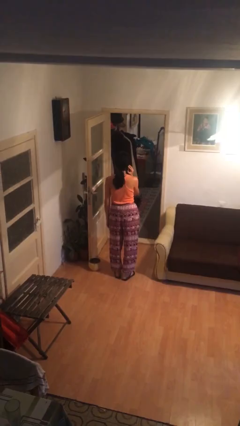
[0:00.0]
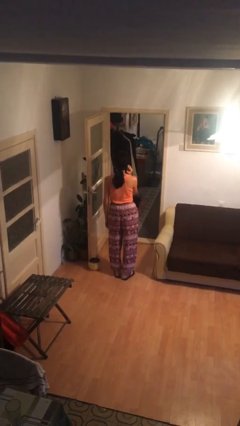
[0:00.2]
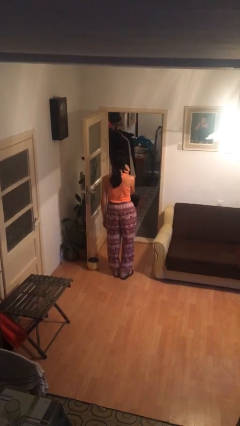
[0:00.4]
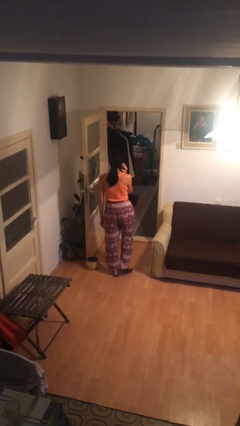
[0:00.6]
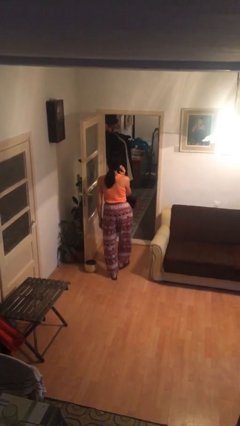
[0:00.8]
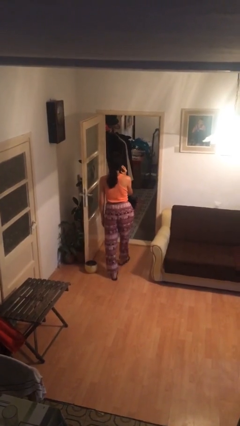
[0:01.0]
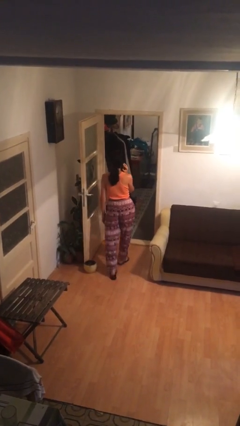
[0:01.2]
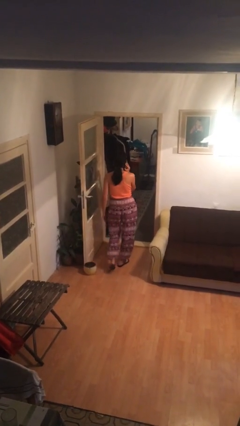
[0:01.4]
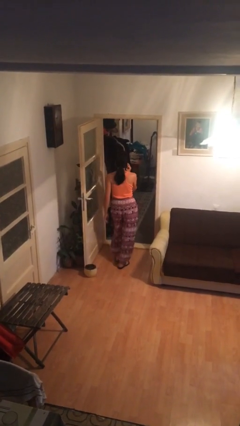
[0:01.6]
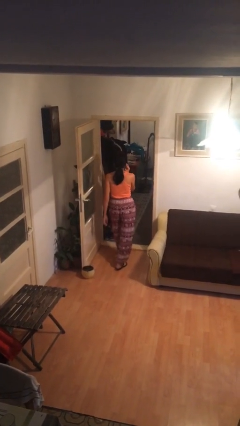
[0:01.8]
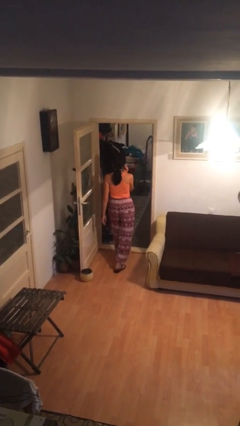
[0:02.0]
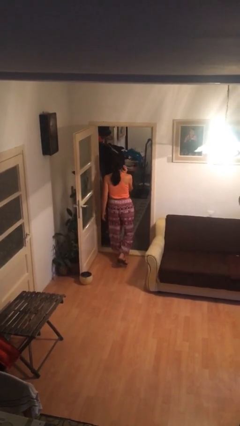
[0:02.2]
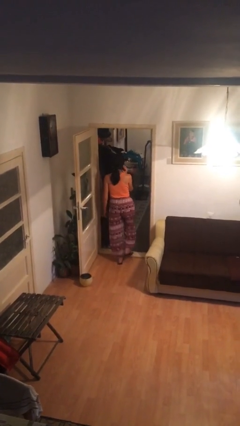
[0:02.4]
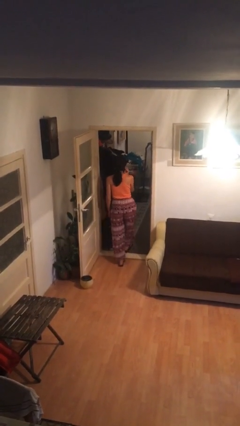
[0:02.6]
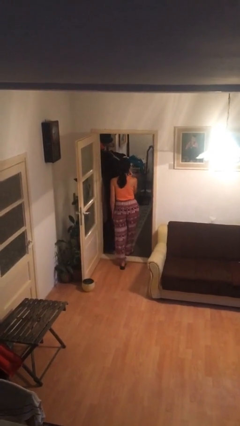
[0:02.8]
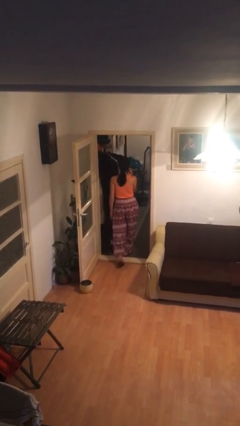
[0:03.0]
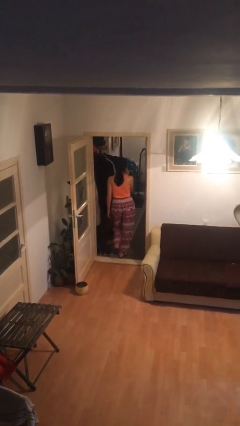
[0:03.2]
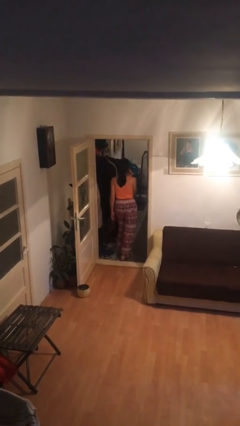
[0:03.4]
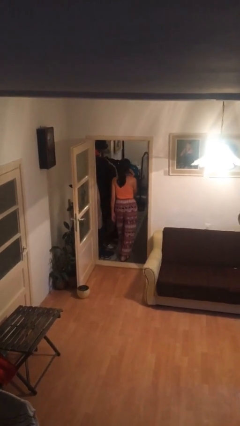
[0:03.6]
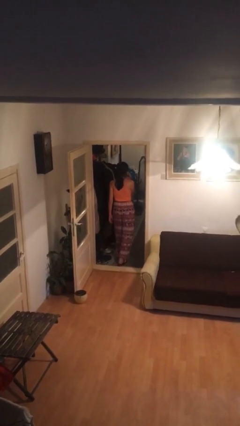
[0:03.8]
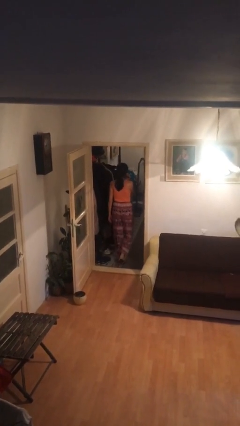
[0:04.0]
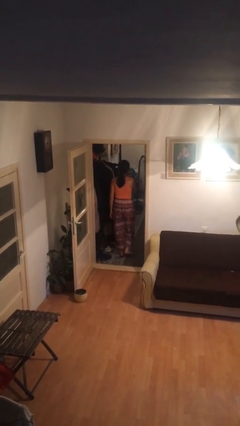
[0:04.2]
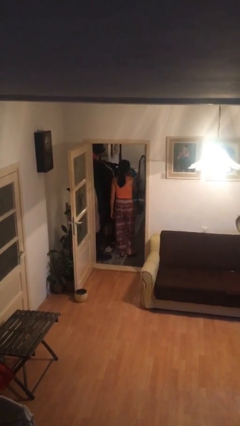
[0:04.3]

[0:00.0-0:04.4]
person exits scene through structure

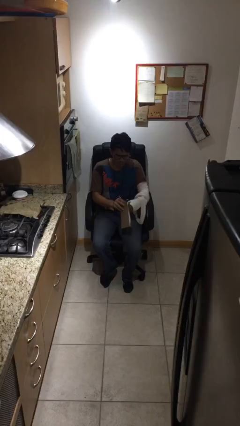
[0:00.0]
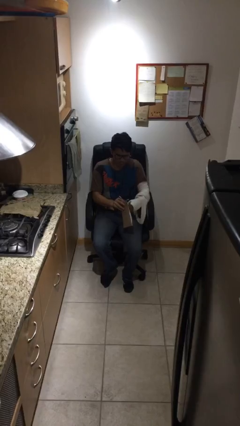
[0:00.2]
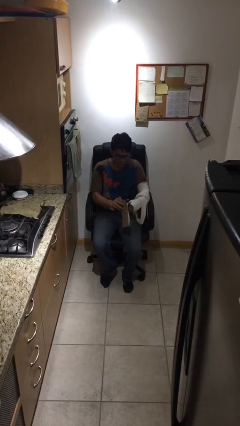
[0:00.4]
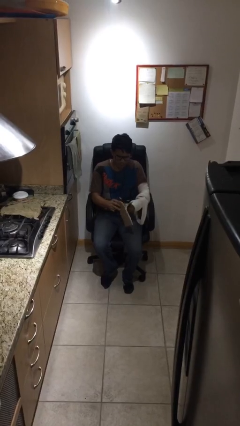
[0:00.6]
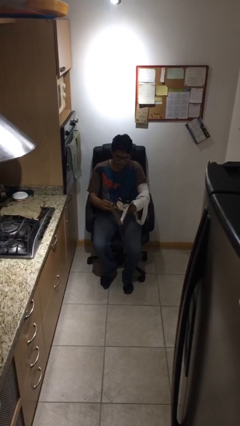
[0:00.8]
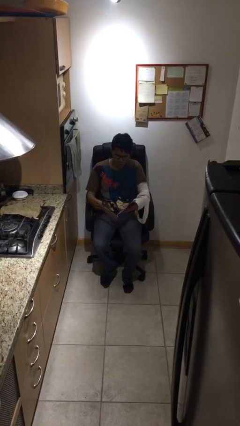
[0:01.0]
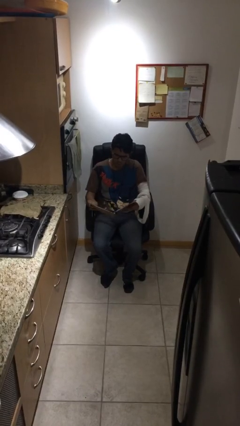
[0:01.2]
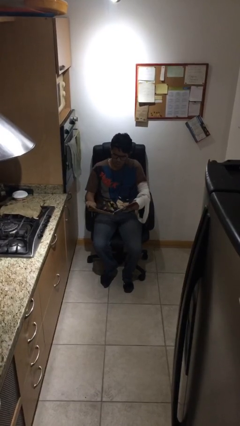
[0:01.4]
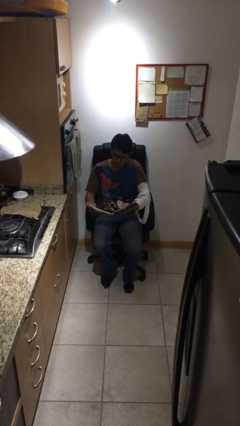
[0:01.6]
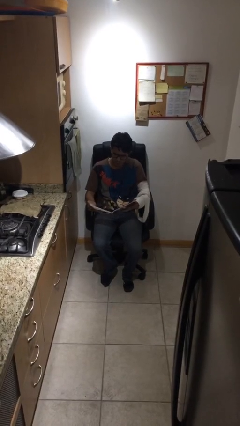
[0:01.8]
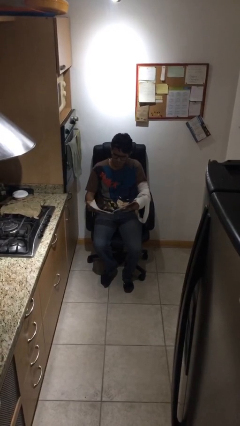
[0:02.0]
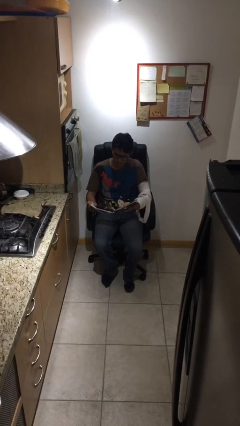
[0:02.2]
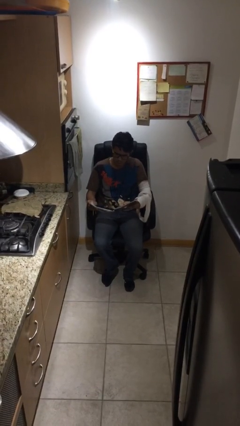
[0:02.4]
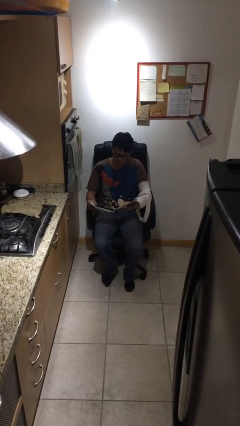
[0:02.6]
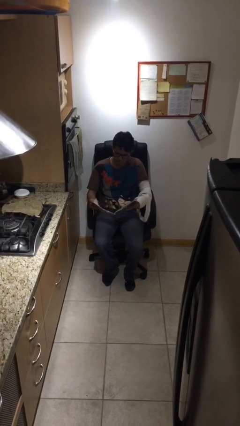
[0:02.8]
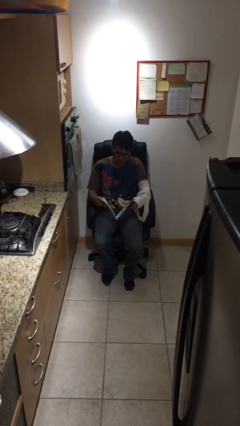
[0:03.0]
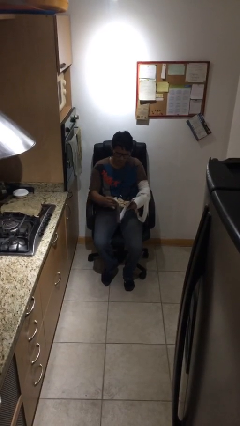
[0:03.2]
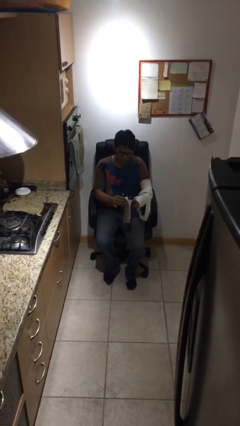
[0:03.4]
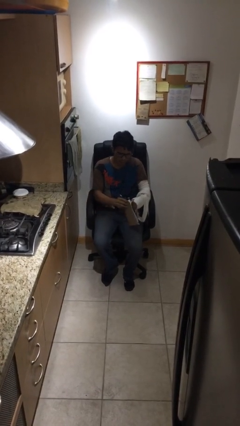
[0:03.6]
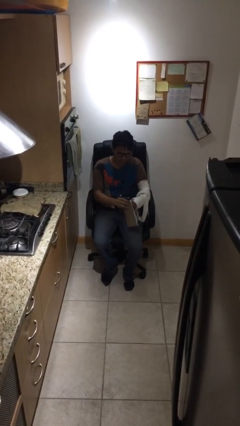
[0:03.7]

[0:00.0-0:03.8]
person reads document

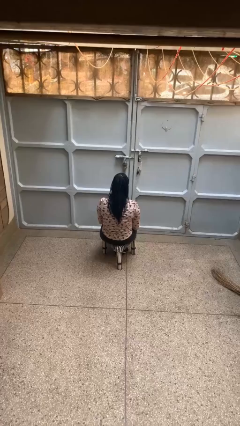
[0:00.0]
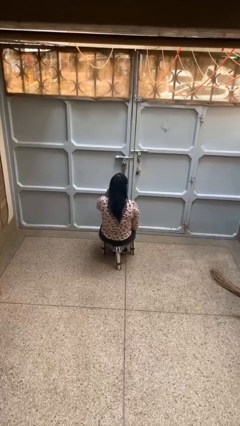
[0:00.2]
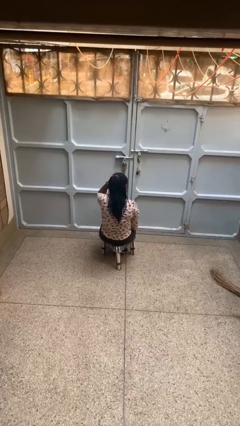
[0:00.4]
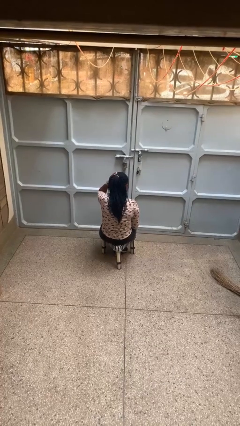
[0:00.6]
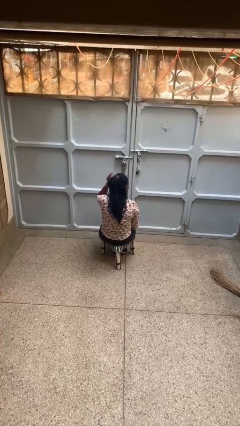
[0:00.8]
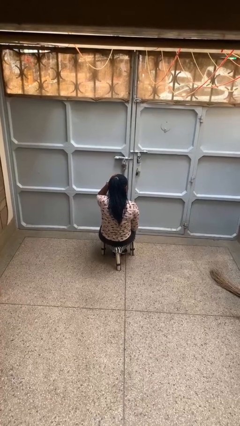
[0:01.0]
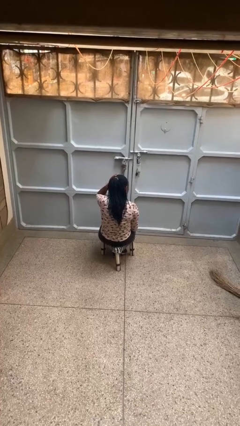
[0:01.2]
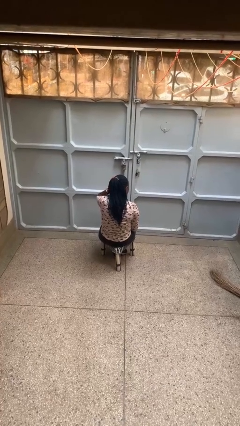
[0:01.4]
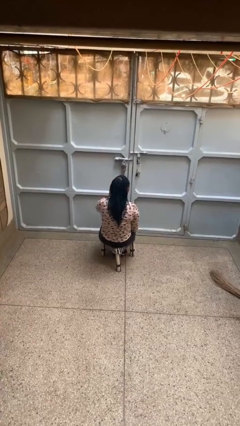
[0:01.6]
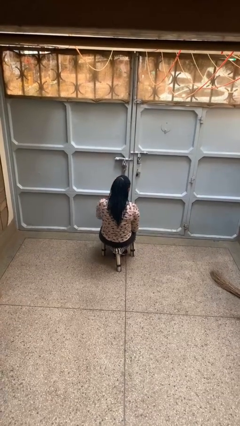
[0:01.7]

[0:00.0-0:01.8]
person strokes hair

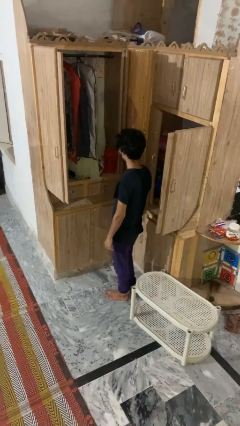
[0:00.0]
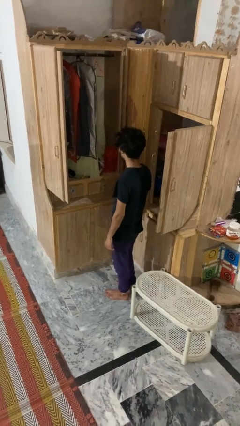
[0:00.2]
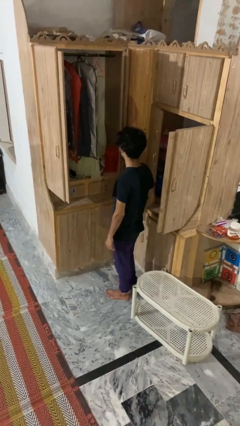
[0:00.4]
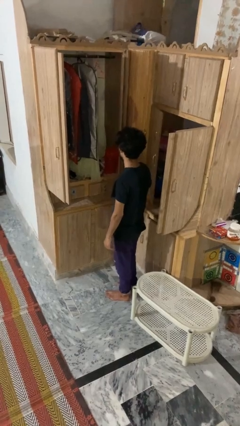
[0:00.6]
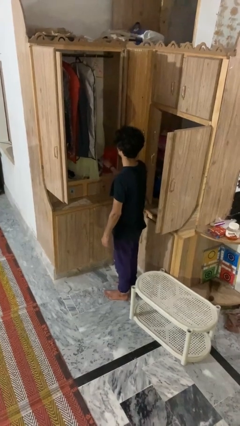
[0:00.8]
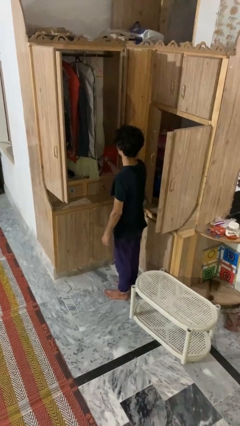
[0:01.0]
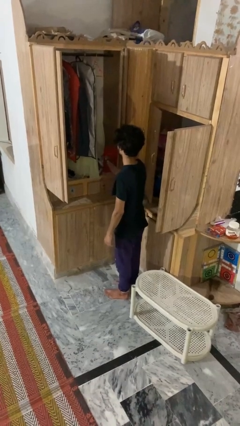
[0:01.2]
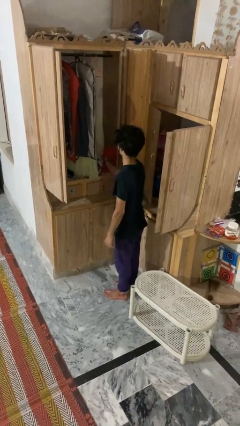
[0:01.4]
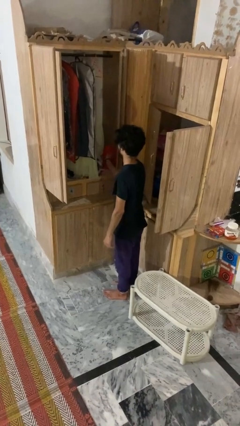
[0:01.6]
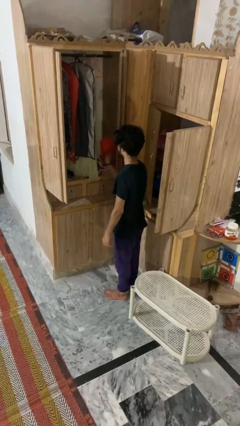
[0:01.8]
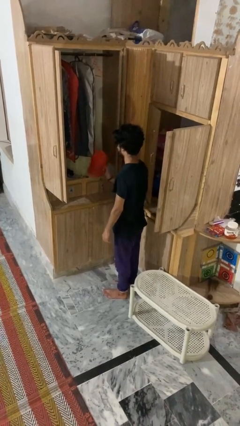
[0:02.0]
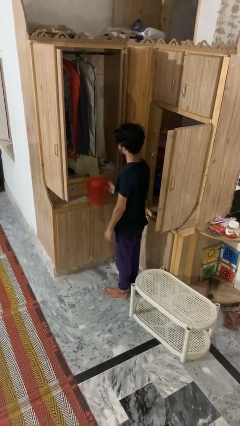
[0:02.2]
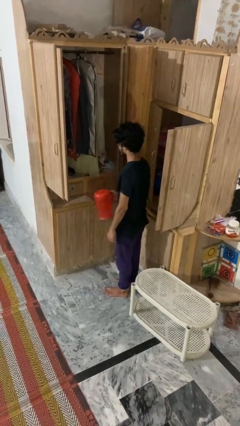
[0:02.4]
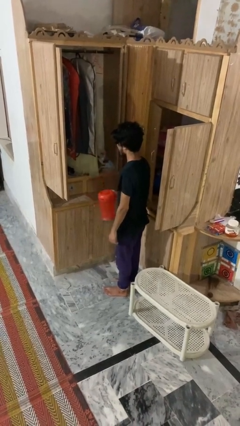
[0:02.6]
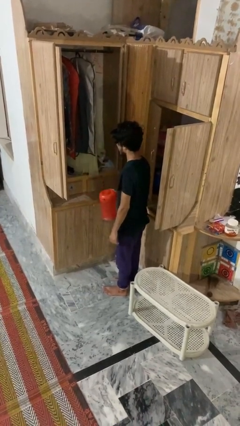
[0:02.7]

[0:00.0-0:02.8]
person picks up object from cabinet

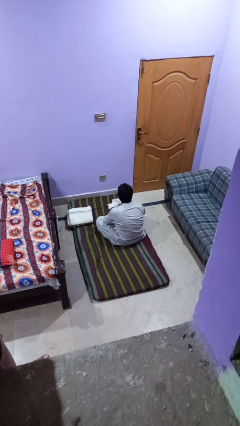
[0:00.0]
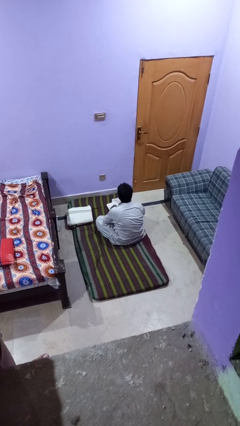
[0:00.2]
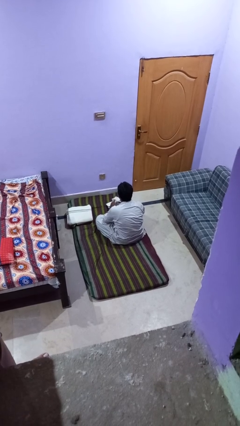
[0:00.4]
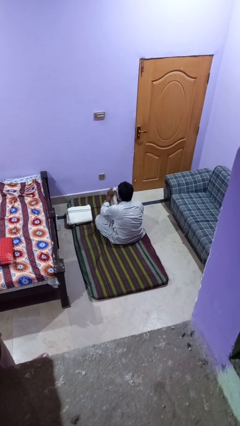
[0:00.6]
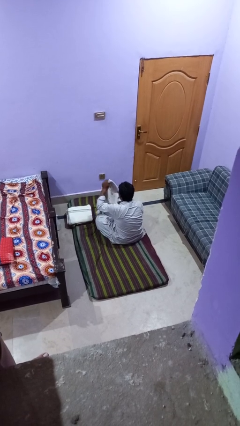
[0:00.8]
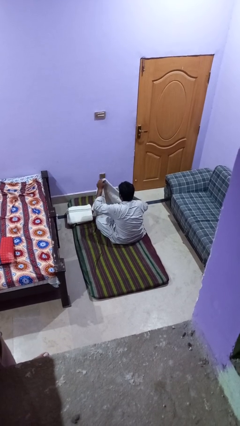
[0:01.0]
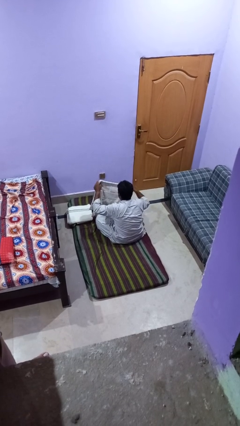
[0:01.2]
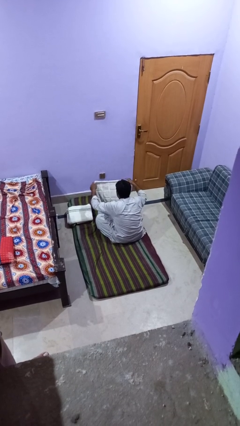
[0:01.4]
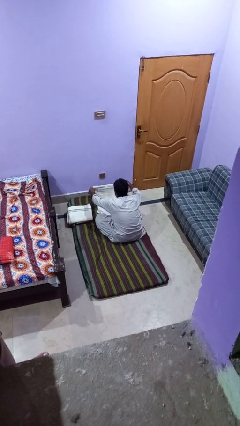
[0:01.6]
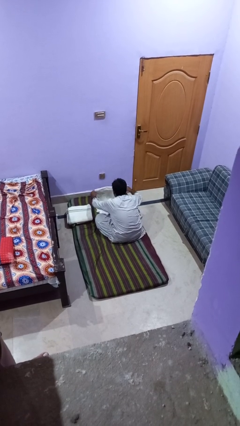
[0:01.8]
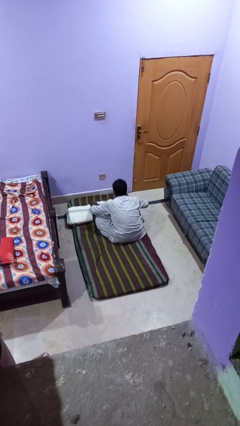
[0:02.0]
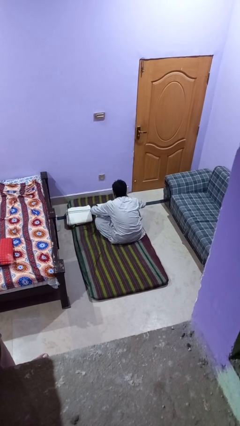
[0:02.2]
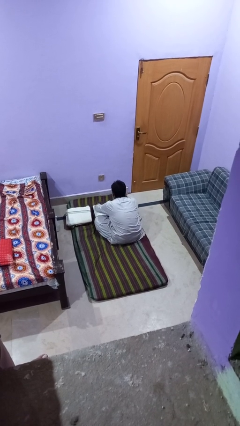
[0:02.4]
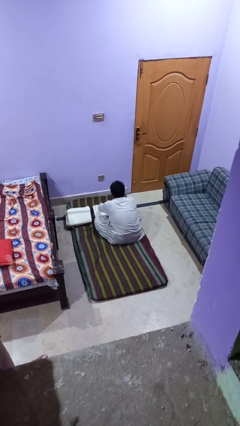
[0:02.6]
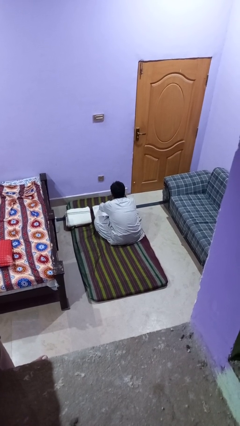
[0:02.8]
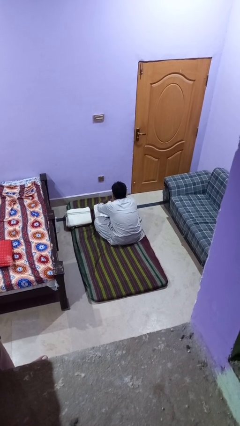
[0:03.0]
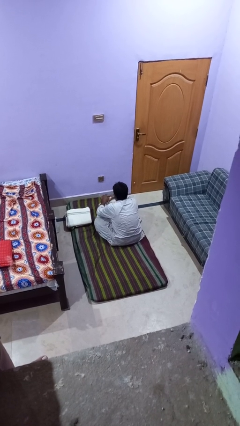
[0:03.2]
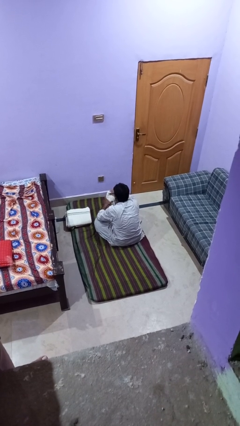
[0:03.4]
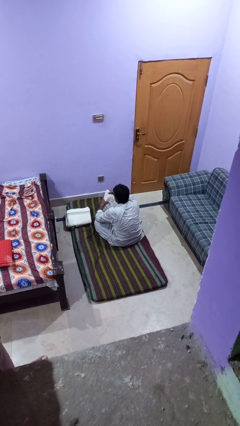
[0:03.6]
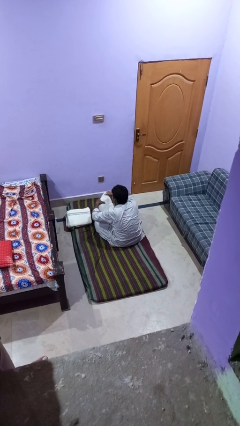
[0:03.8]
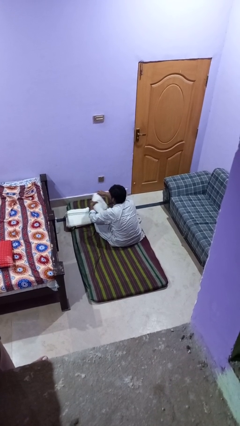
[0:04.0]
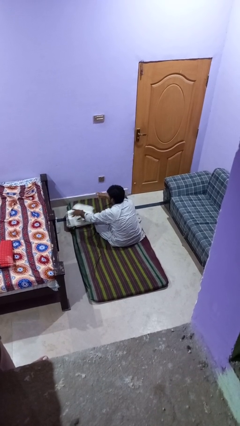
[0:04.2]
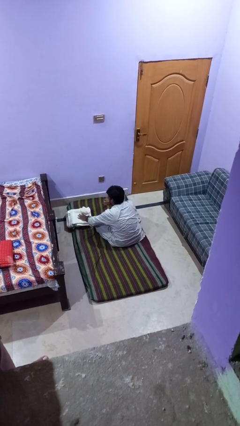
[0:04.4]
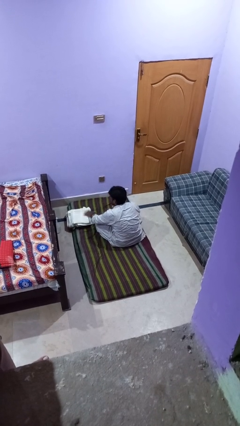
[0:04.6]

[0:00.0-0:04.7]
person folds towel
